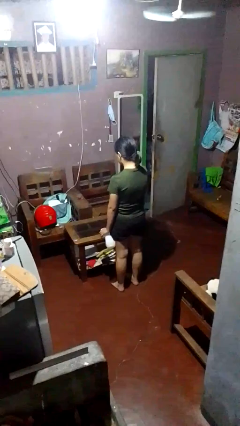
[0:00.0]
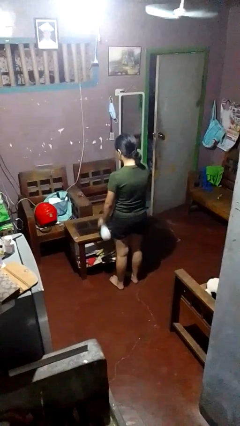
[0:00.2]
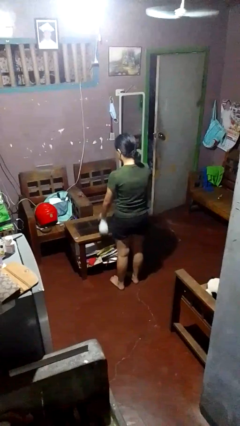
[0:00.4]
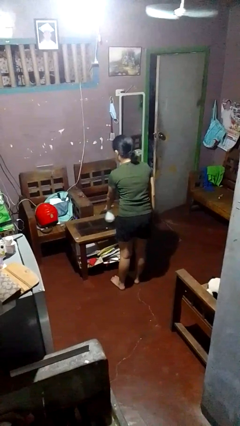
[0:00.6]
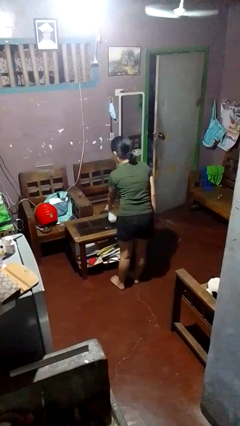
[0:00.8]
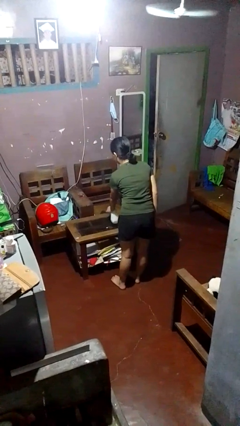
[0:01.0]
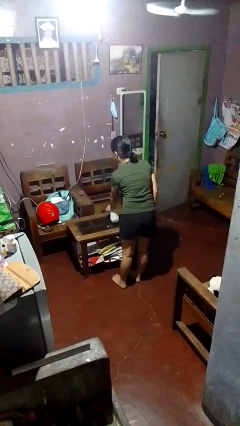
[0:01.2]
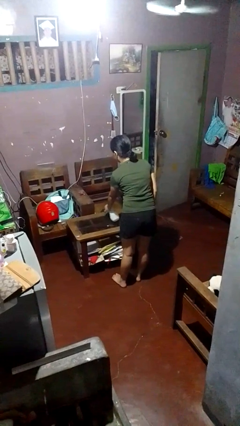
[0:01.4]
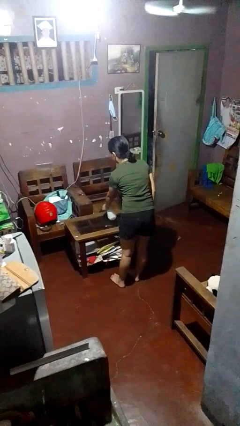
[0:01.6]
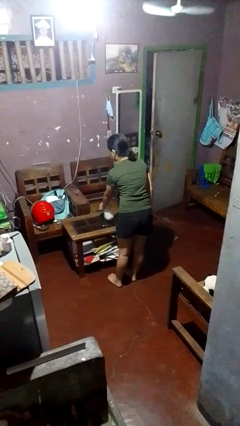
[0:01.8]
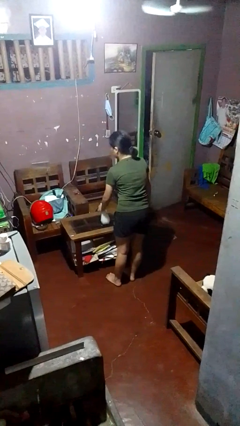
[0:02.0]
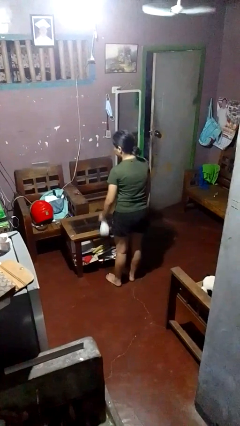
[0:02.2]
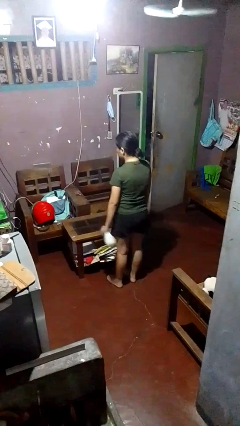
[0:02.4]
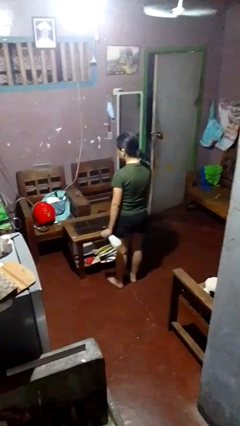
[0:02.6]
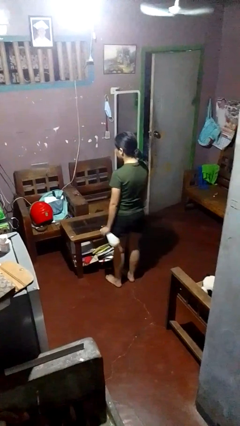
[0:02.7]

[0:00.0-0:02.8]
person sprays from bottle

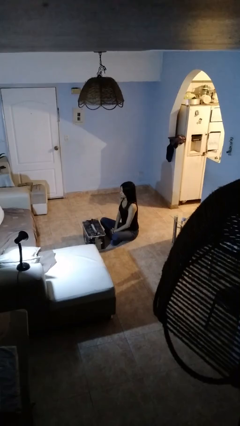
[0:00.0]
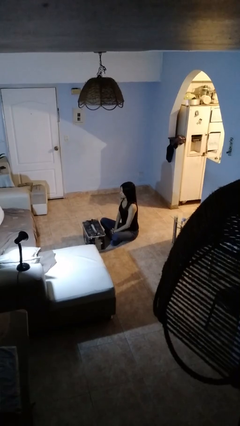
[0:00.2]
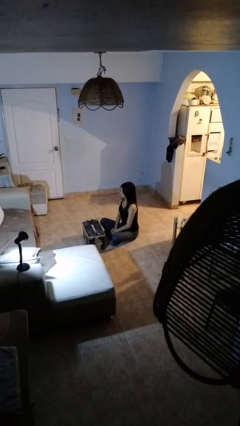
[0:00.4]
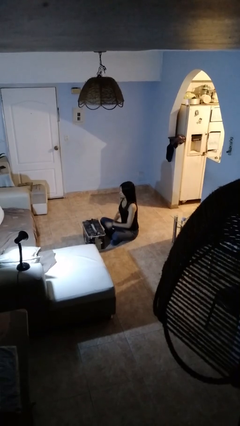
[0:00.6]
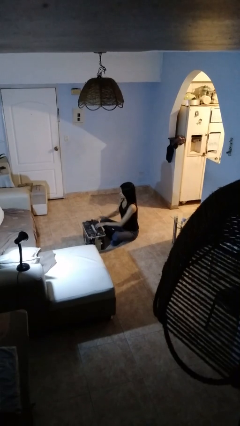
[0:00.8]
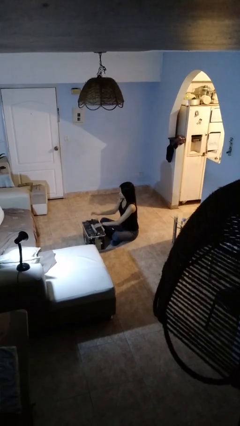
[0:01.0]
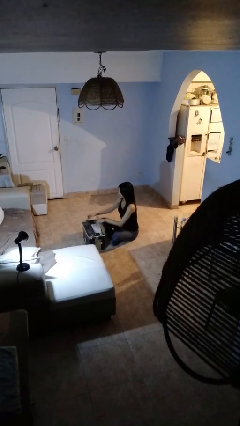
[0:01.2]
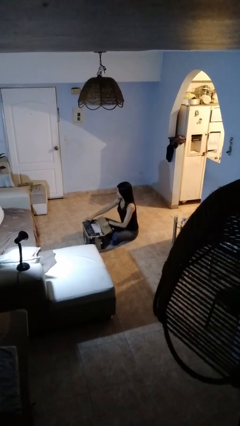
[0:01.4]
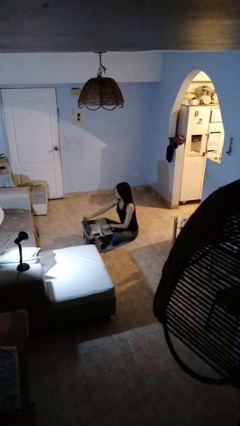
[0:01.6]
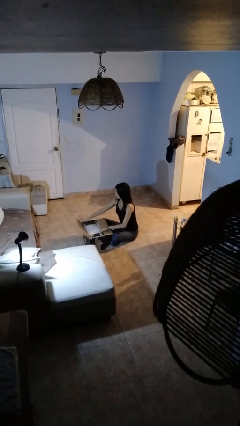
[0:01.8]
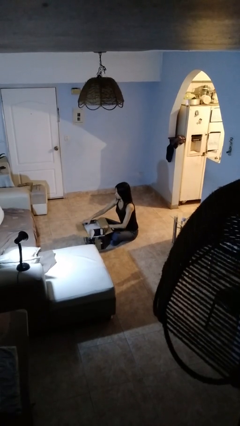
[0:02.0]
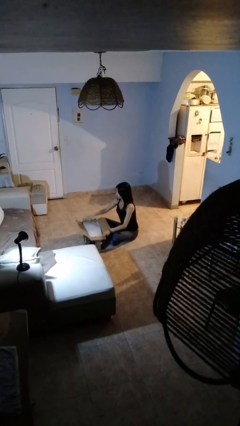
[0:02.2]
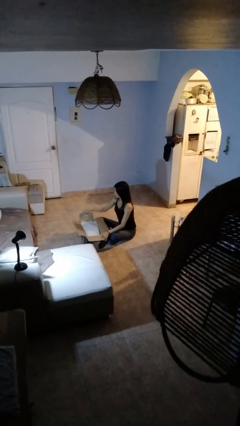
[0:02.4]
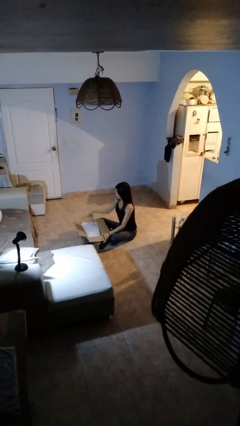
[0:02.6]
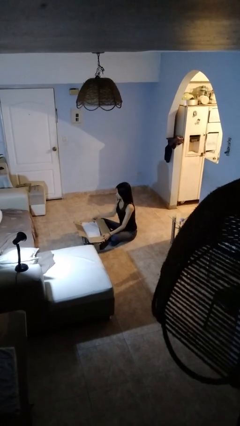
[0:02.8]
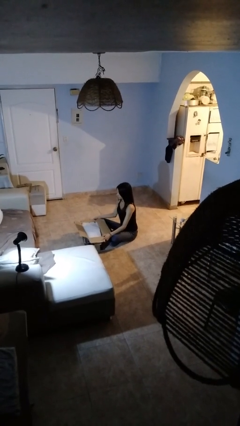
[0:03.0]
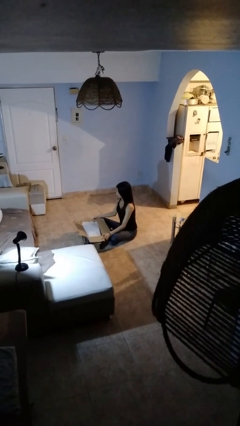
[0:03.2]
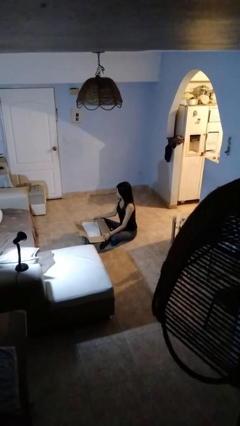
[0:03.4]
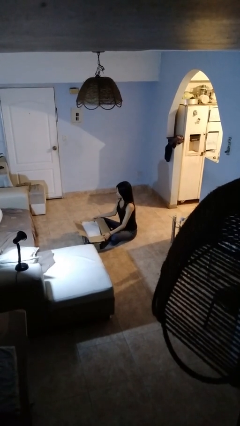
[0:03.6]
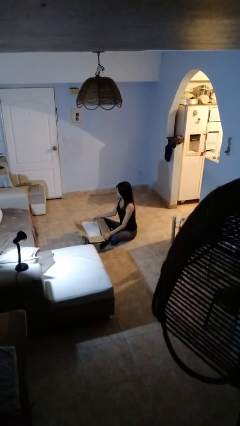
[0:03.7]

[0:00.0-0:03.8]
person opens box

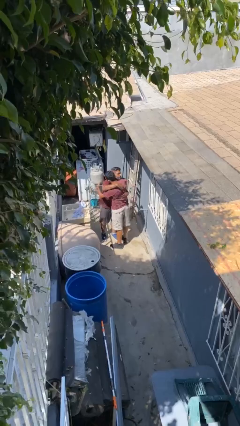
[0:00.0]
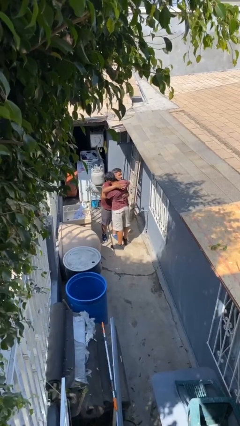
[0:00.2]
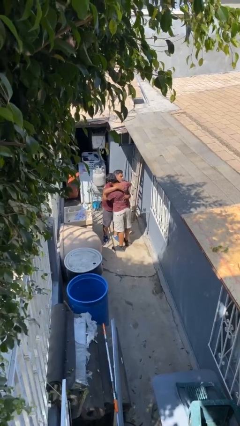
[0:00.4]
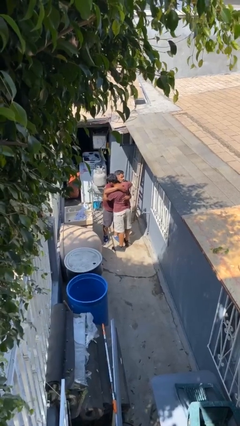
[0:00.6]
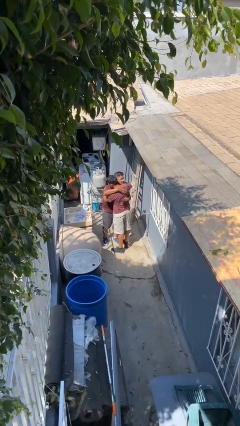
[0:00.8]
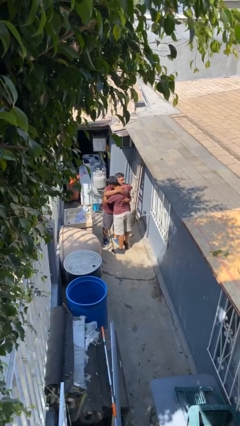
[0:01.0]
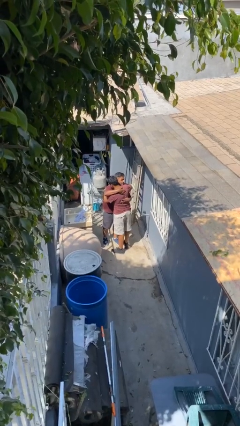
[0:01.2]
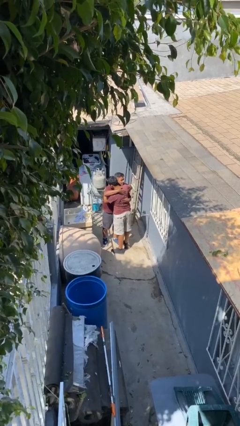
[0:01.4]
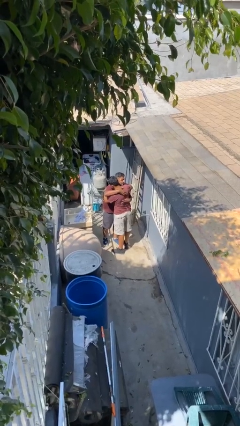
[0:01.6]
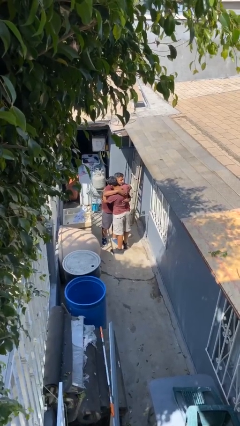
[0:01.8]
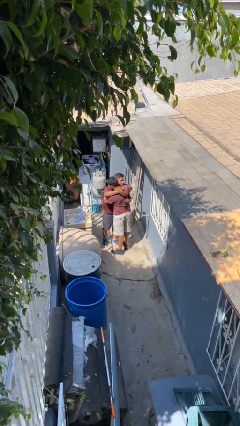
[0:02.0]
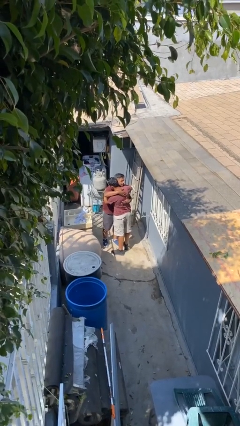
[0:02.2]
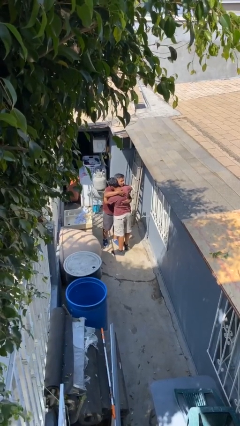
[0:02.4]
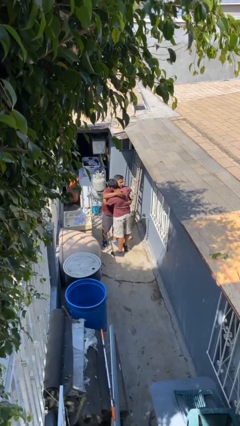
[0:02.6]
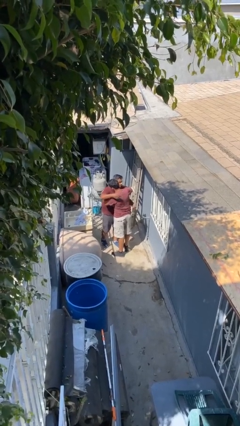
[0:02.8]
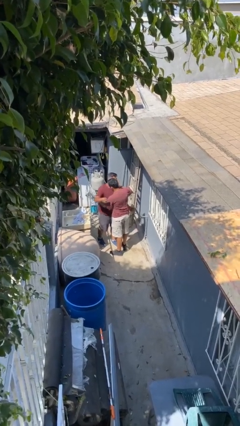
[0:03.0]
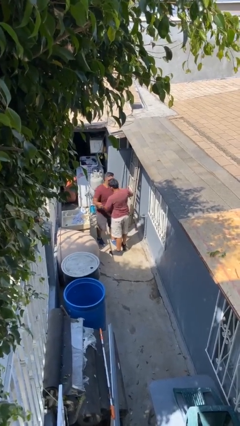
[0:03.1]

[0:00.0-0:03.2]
person embraces person

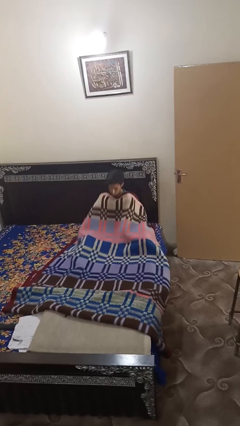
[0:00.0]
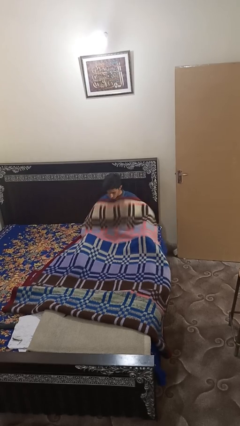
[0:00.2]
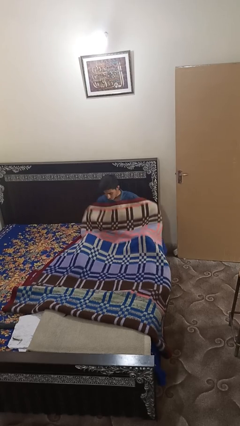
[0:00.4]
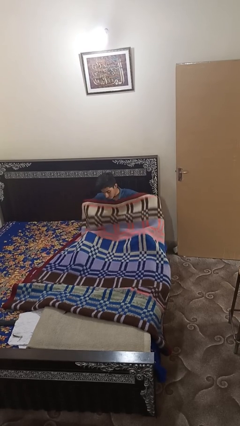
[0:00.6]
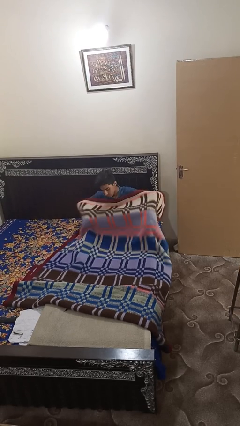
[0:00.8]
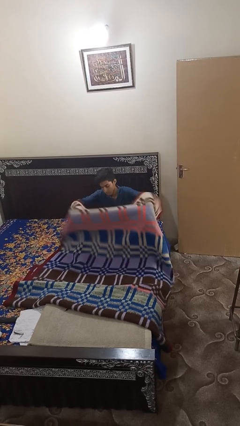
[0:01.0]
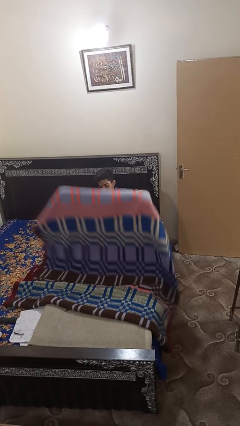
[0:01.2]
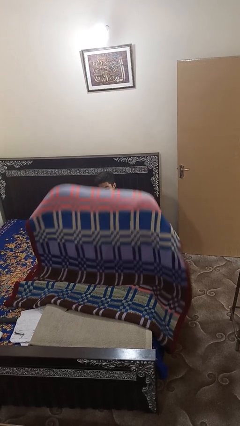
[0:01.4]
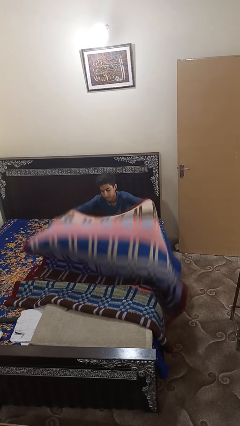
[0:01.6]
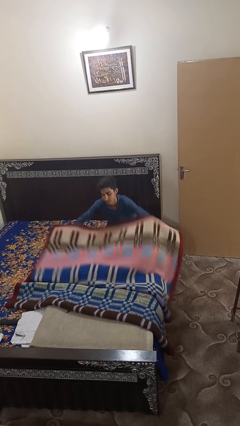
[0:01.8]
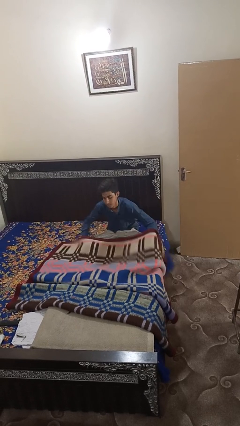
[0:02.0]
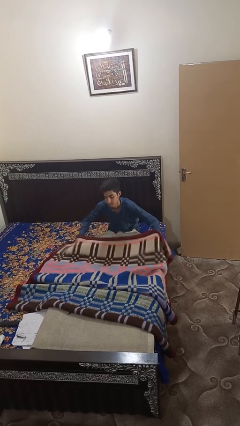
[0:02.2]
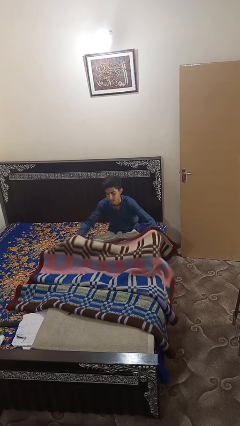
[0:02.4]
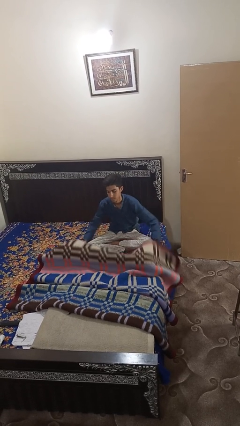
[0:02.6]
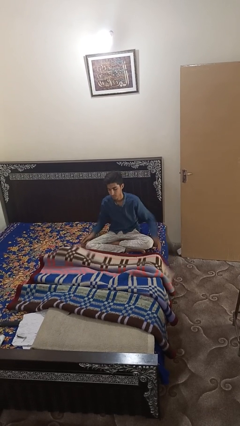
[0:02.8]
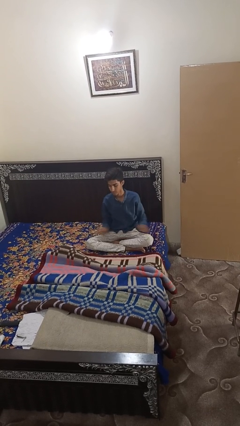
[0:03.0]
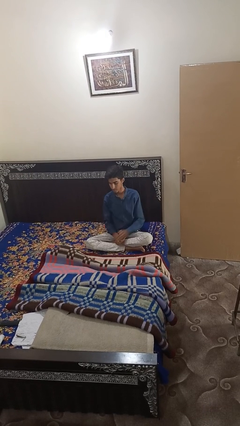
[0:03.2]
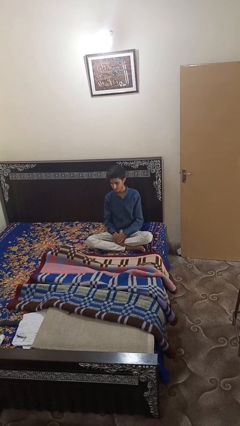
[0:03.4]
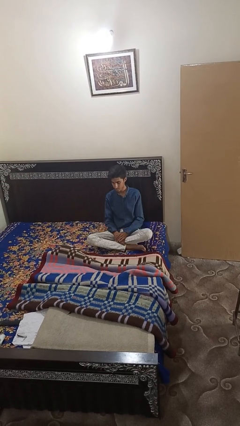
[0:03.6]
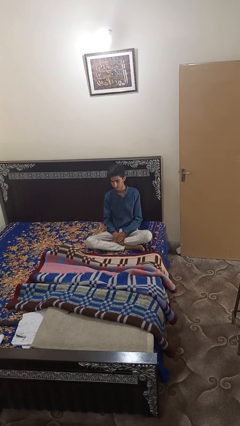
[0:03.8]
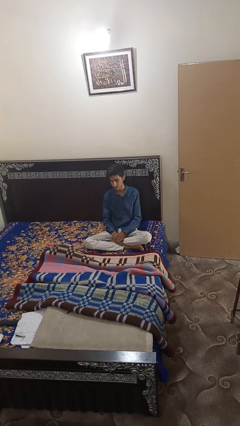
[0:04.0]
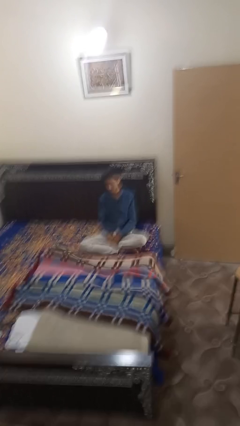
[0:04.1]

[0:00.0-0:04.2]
person uncovers with blanket

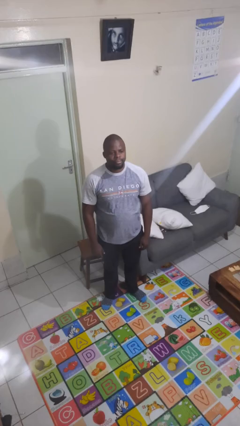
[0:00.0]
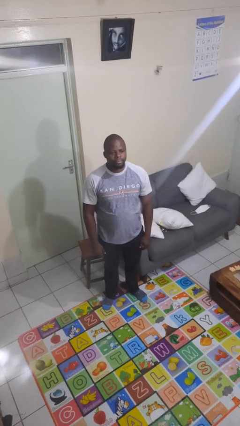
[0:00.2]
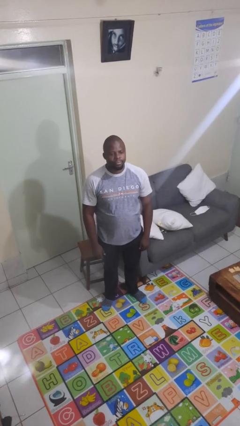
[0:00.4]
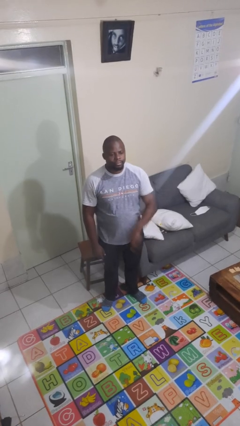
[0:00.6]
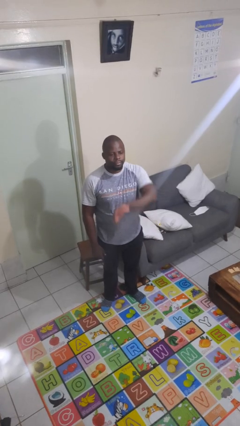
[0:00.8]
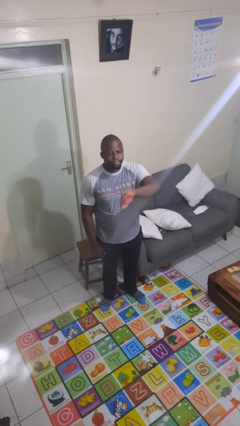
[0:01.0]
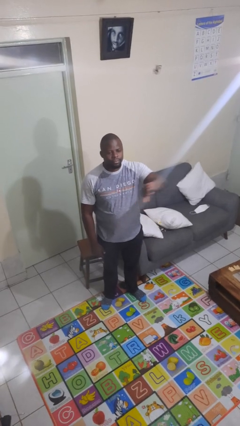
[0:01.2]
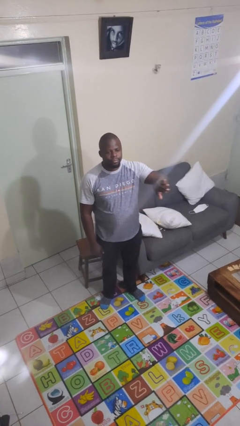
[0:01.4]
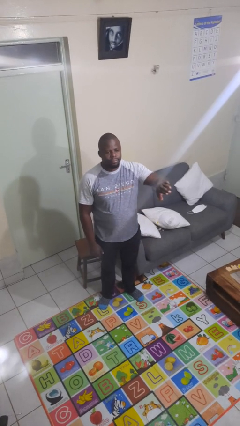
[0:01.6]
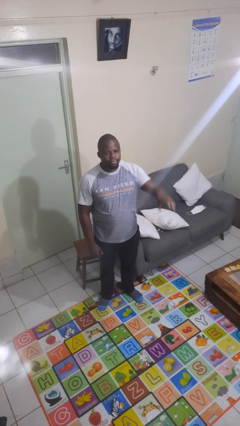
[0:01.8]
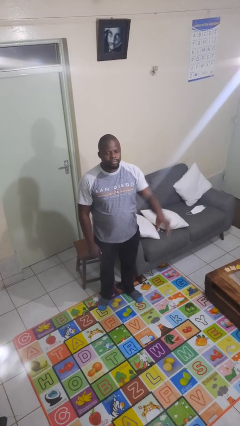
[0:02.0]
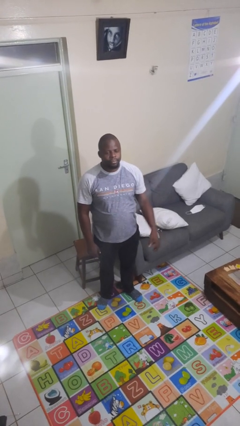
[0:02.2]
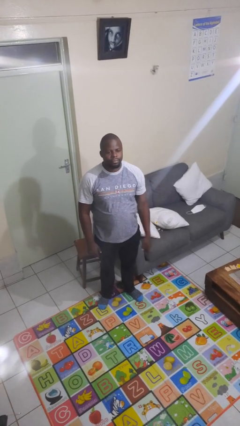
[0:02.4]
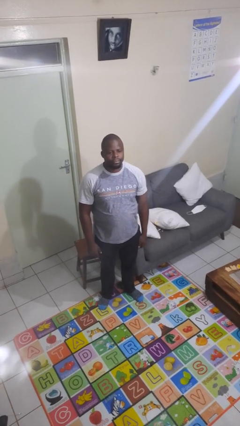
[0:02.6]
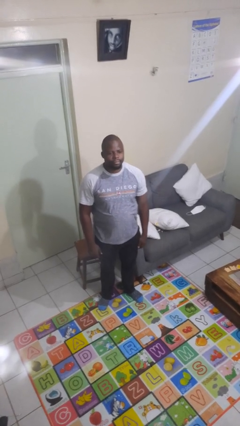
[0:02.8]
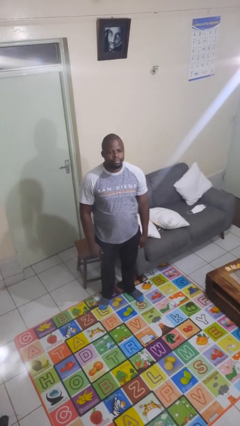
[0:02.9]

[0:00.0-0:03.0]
person gestures swipe left

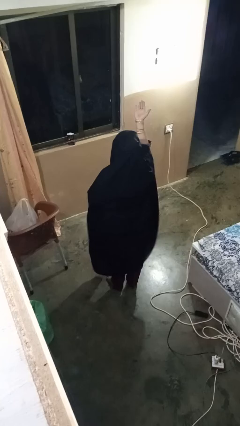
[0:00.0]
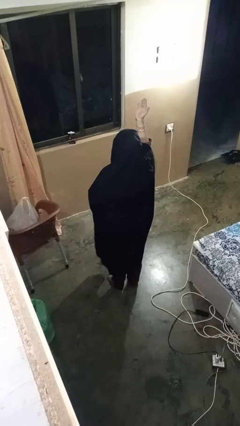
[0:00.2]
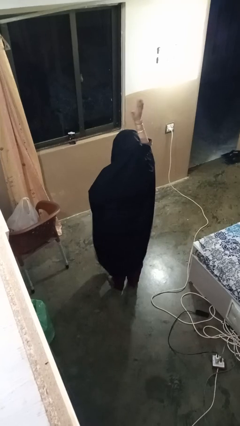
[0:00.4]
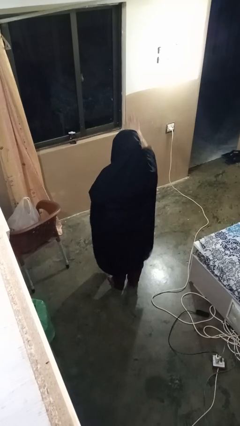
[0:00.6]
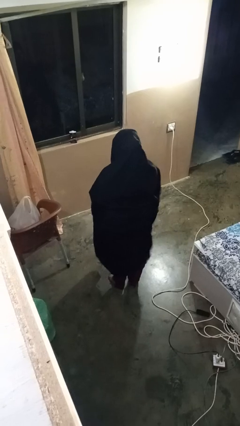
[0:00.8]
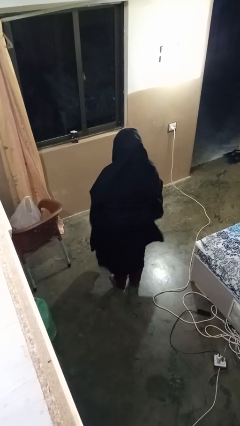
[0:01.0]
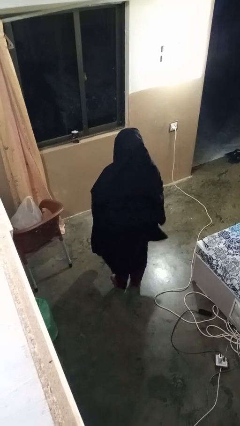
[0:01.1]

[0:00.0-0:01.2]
person gestures swipe down
